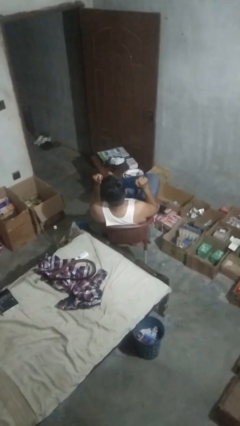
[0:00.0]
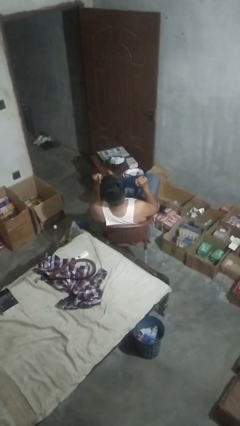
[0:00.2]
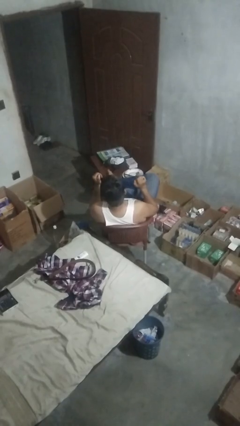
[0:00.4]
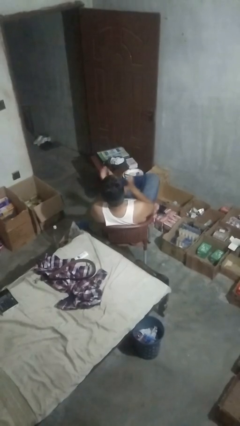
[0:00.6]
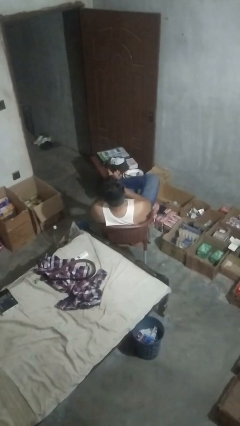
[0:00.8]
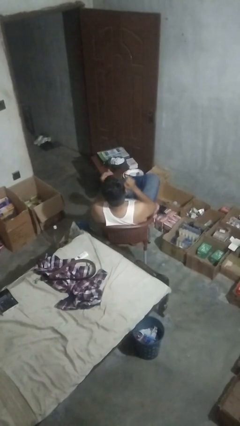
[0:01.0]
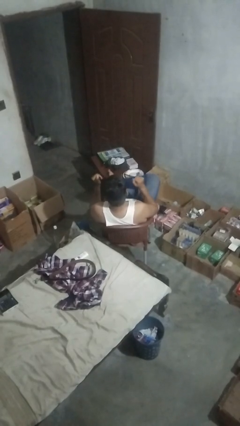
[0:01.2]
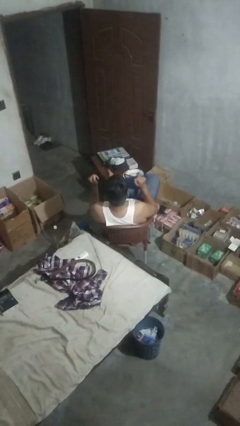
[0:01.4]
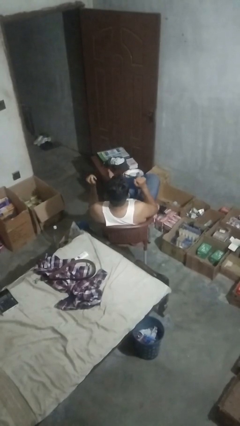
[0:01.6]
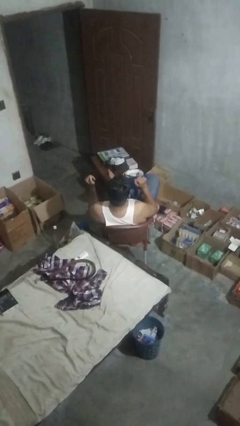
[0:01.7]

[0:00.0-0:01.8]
person claps hands

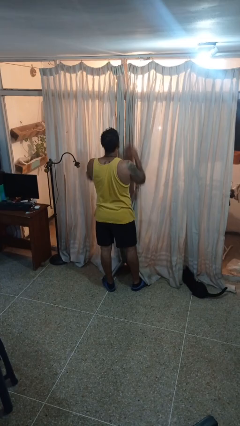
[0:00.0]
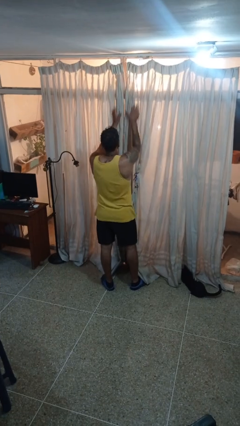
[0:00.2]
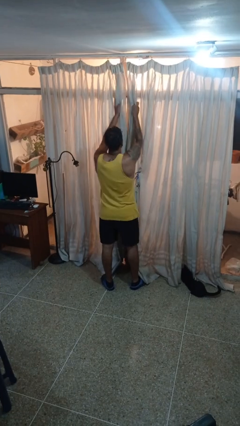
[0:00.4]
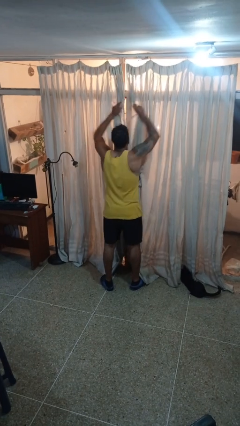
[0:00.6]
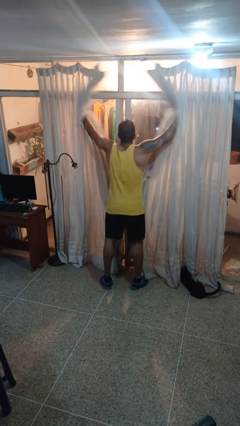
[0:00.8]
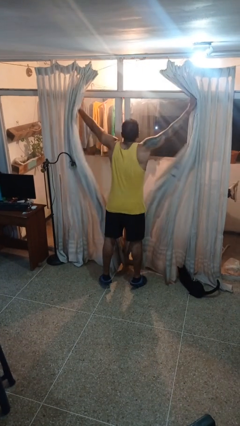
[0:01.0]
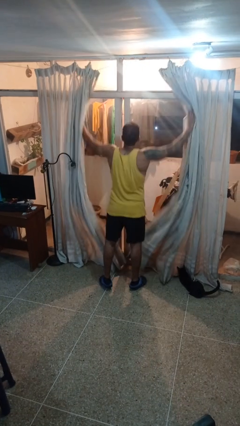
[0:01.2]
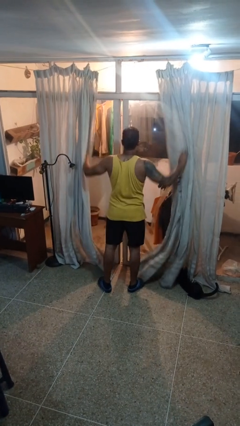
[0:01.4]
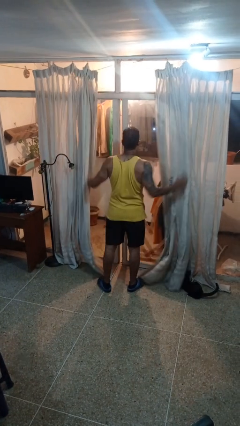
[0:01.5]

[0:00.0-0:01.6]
person opens curtains

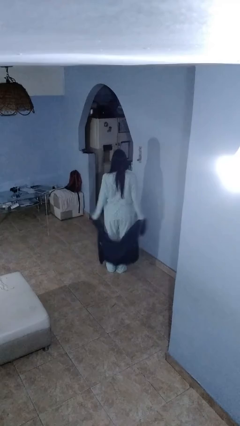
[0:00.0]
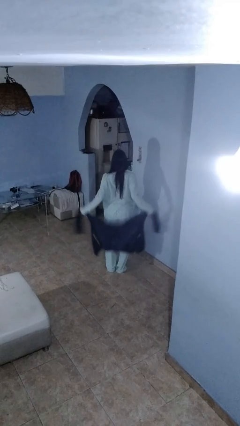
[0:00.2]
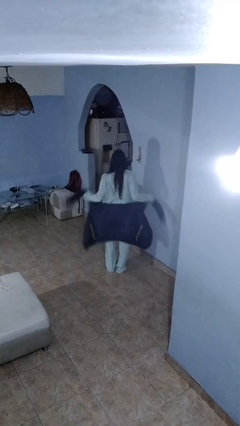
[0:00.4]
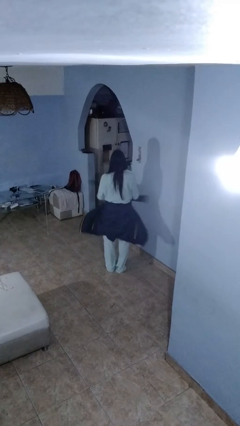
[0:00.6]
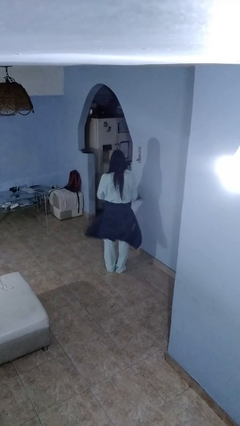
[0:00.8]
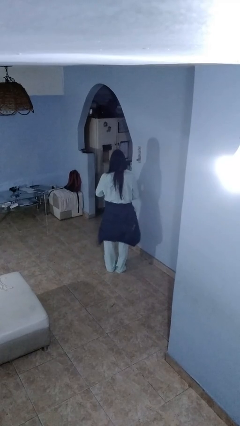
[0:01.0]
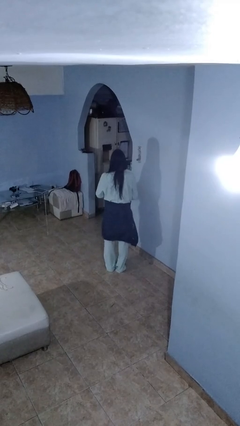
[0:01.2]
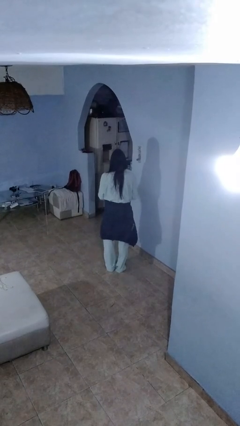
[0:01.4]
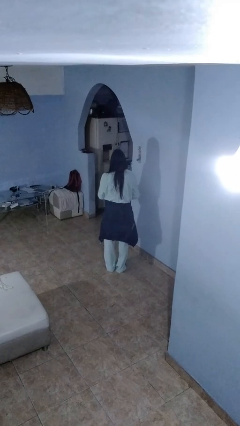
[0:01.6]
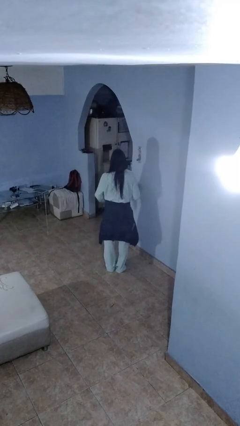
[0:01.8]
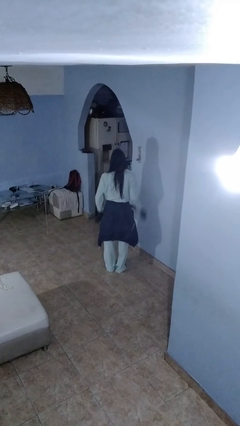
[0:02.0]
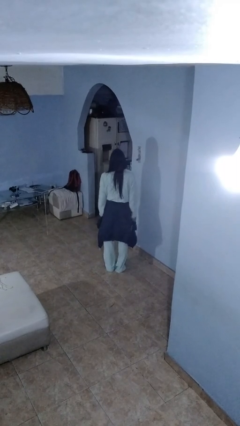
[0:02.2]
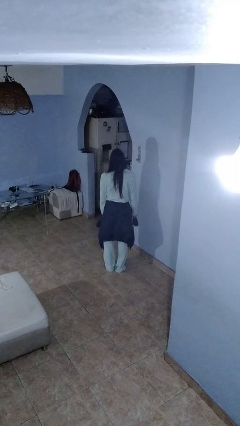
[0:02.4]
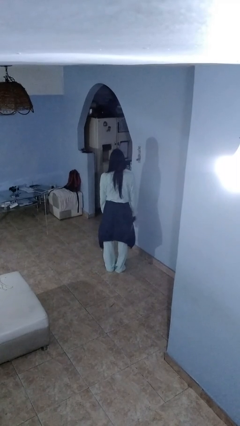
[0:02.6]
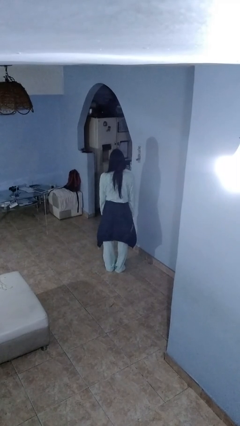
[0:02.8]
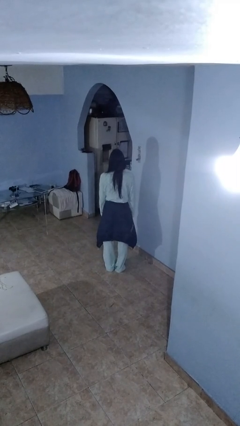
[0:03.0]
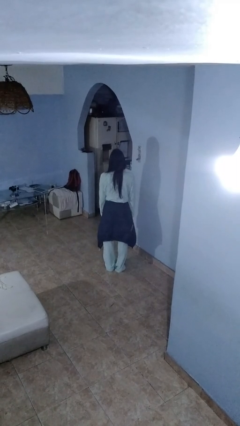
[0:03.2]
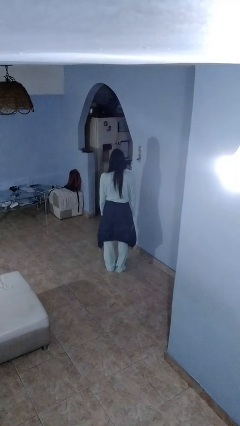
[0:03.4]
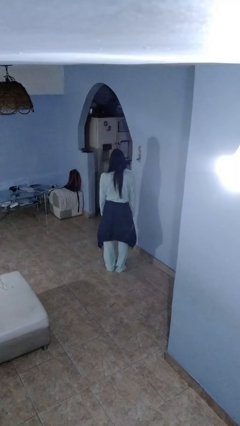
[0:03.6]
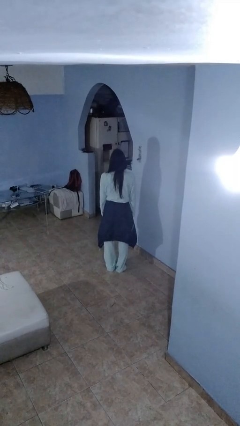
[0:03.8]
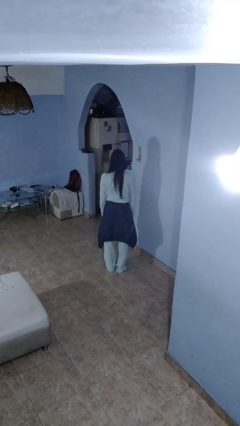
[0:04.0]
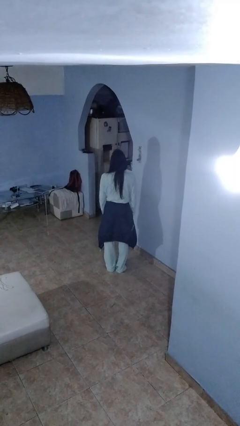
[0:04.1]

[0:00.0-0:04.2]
person ties jacket around waist

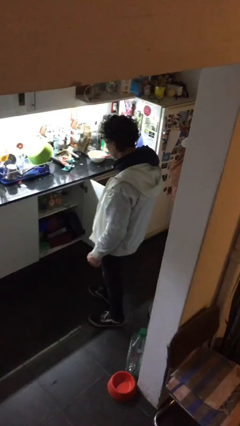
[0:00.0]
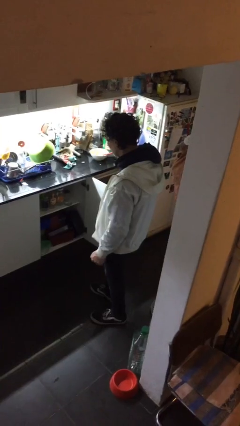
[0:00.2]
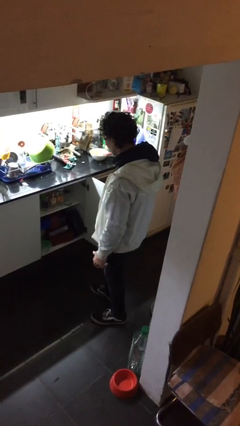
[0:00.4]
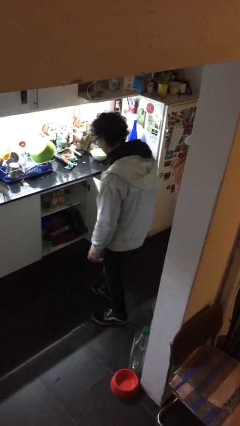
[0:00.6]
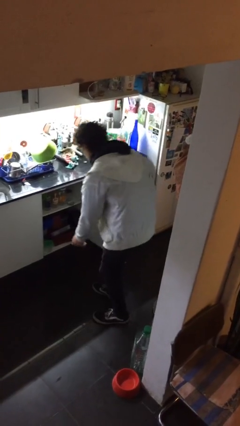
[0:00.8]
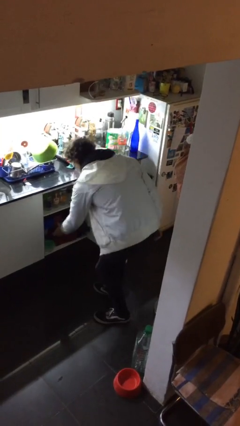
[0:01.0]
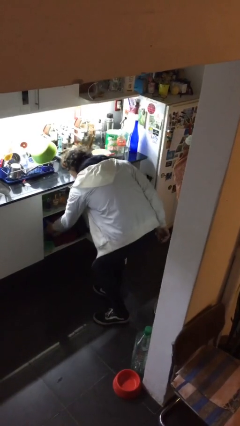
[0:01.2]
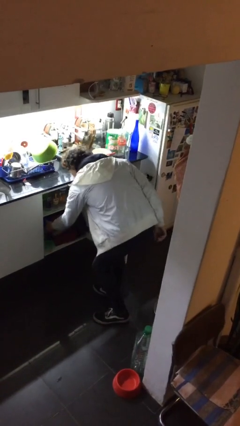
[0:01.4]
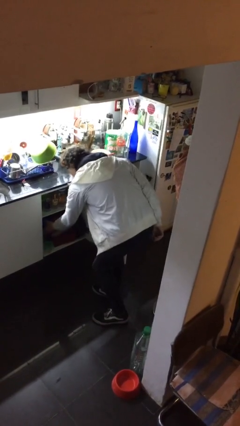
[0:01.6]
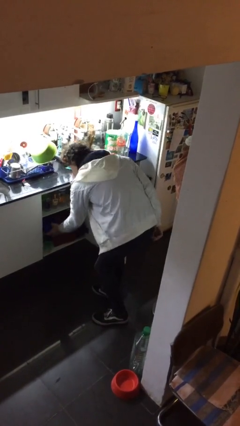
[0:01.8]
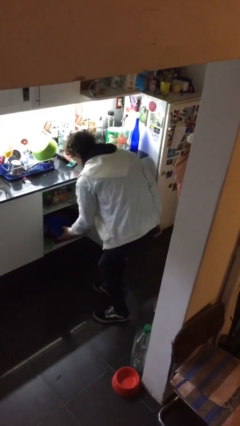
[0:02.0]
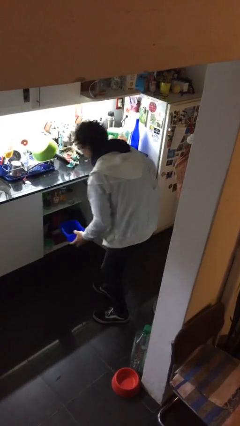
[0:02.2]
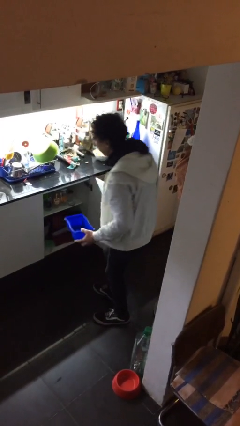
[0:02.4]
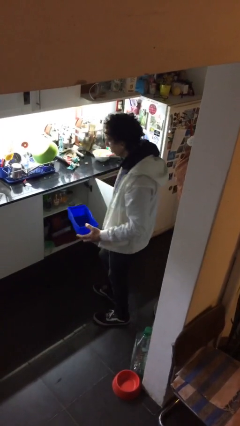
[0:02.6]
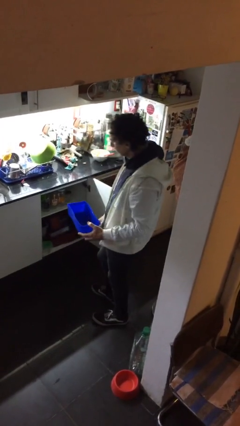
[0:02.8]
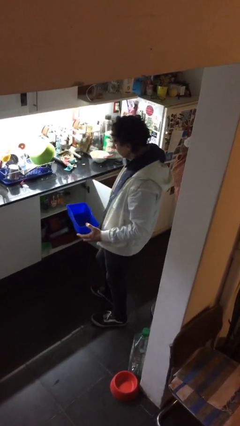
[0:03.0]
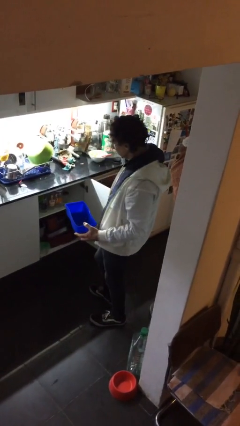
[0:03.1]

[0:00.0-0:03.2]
person picks up object from cabinet

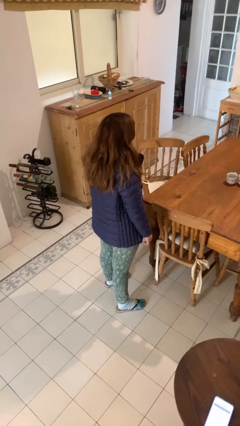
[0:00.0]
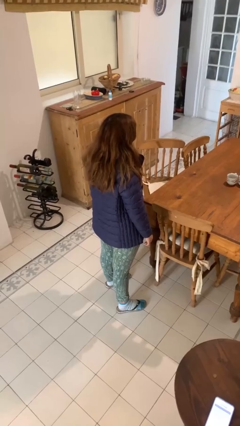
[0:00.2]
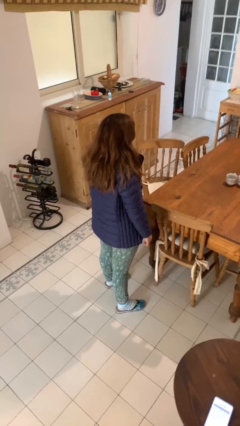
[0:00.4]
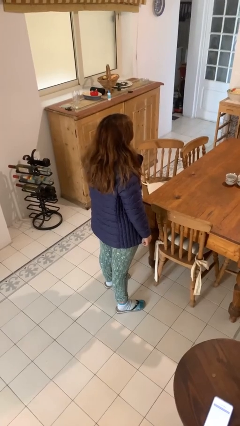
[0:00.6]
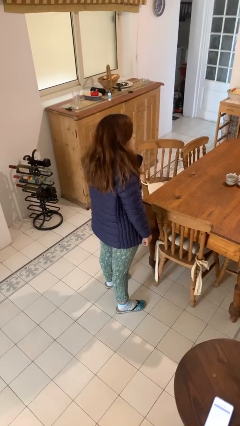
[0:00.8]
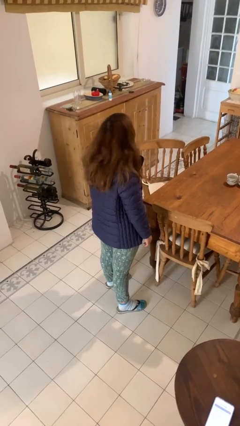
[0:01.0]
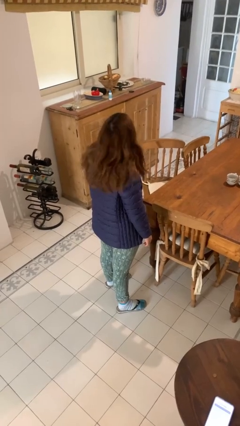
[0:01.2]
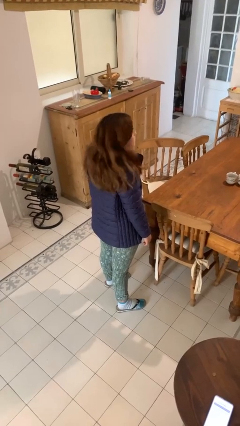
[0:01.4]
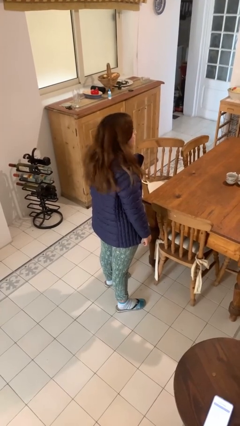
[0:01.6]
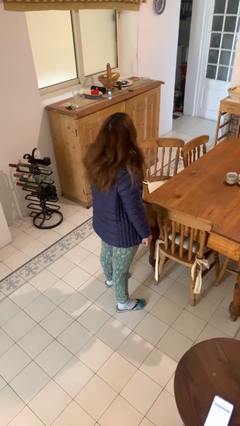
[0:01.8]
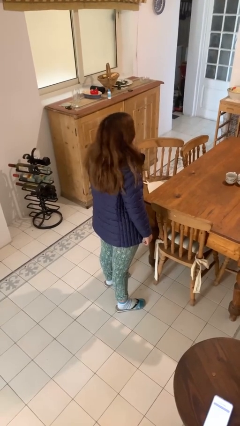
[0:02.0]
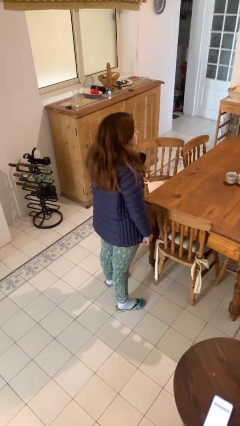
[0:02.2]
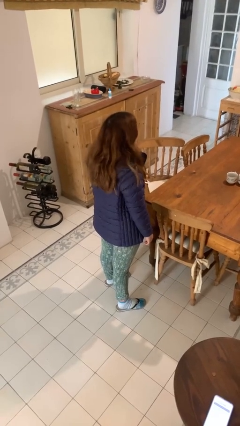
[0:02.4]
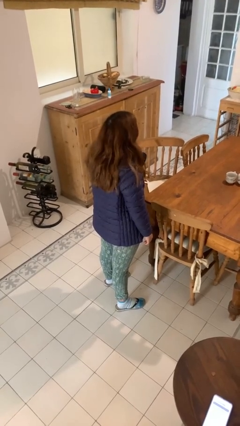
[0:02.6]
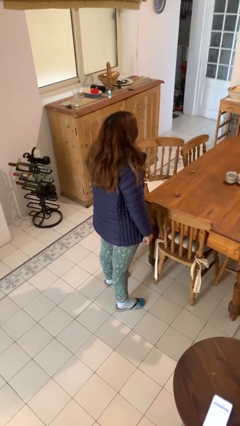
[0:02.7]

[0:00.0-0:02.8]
person shakes head

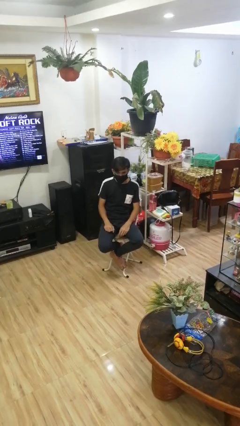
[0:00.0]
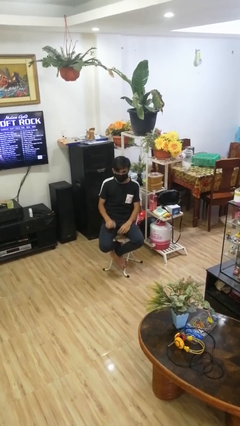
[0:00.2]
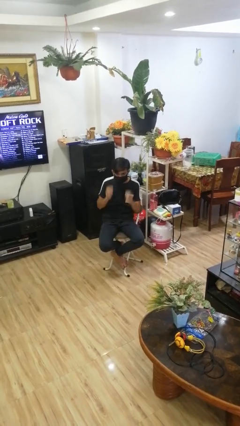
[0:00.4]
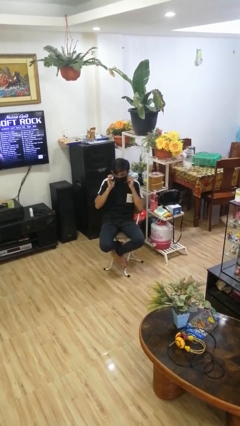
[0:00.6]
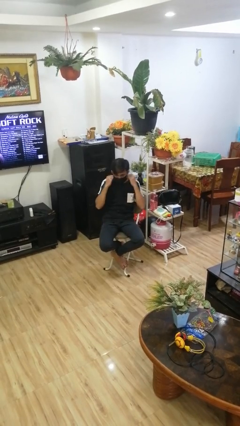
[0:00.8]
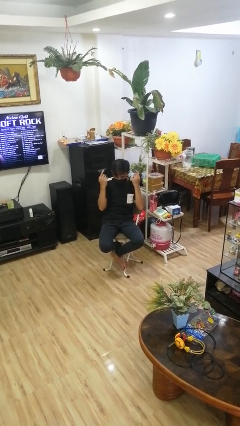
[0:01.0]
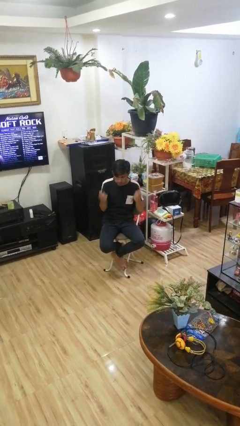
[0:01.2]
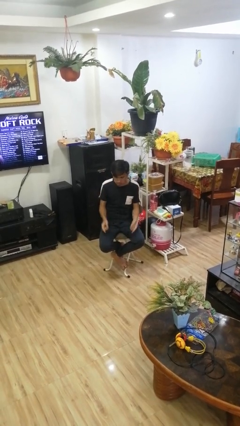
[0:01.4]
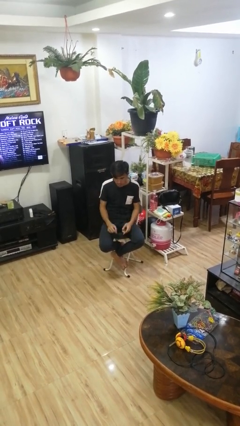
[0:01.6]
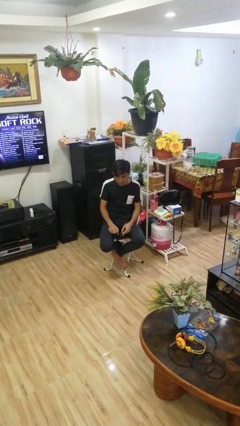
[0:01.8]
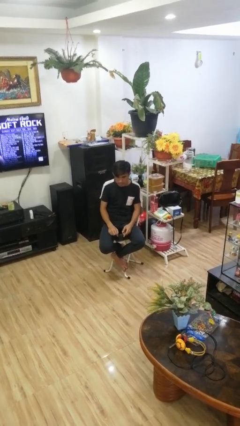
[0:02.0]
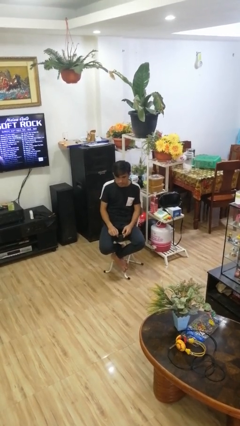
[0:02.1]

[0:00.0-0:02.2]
person takes off facemask

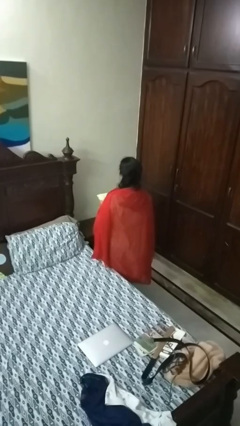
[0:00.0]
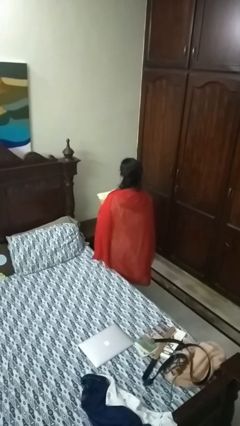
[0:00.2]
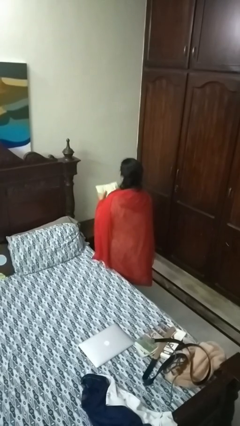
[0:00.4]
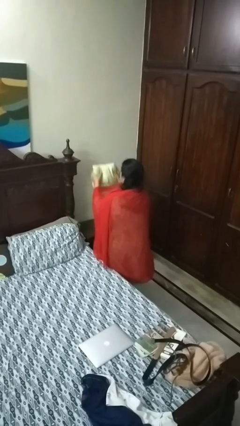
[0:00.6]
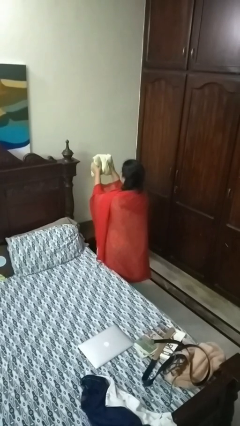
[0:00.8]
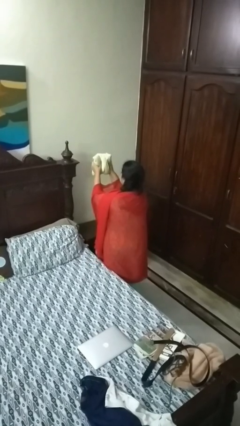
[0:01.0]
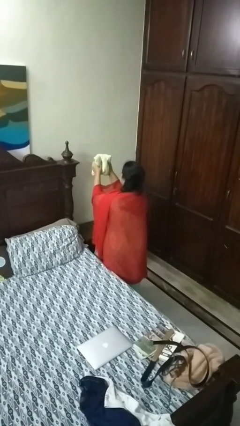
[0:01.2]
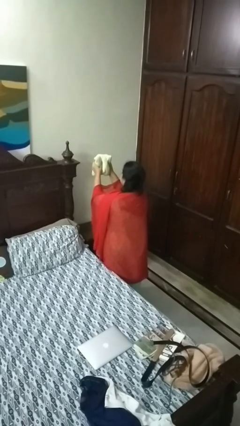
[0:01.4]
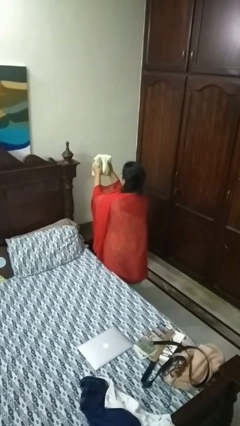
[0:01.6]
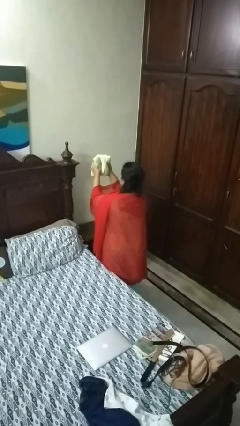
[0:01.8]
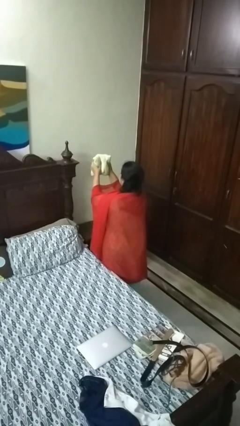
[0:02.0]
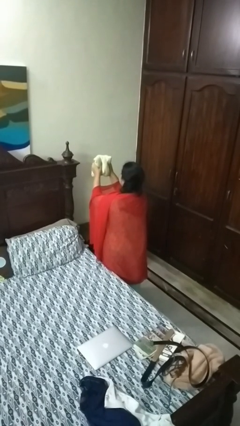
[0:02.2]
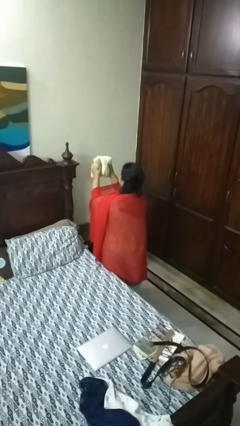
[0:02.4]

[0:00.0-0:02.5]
person squeezes object
